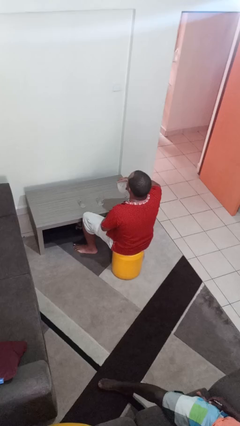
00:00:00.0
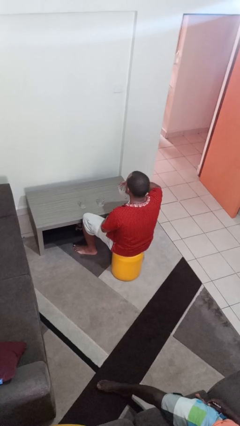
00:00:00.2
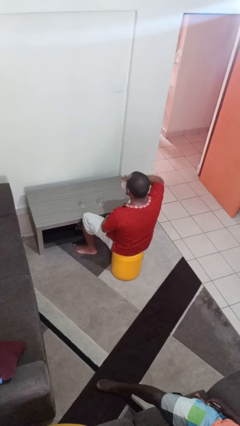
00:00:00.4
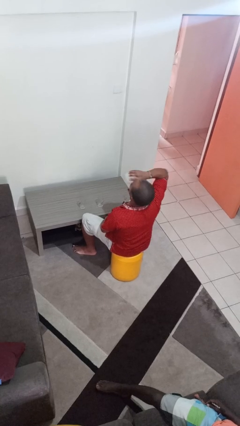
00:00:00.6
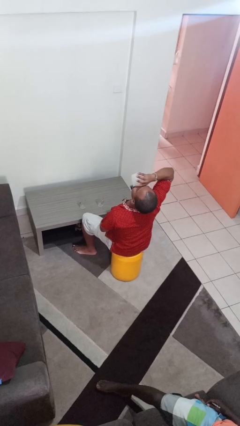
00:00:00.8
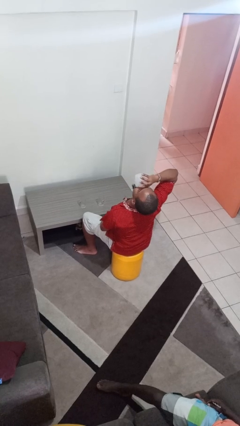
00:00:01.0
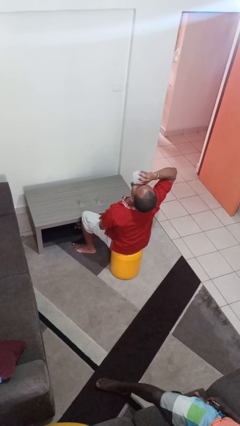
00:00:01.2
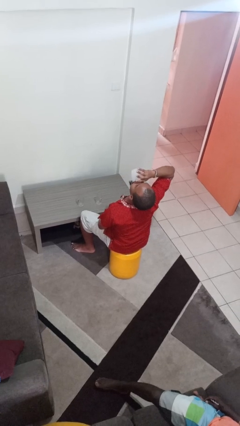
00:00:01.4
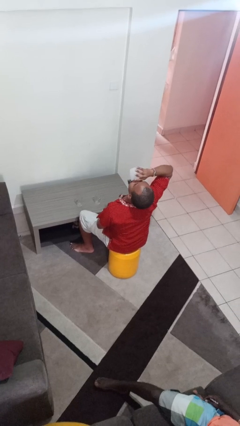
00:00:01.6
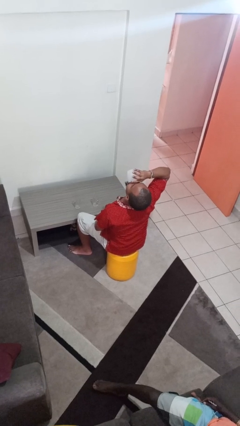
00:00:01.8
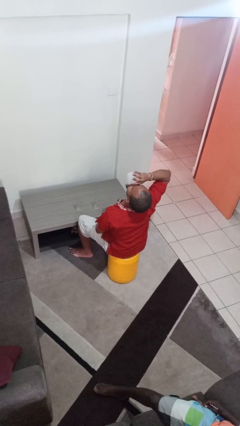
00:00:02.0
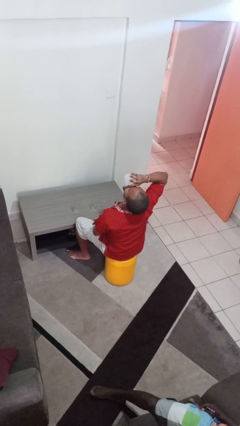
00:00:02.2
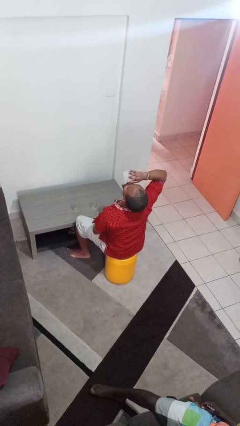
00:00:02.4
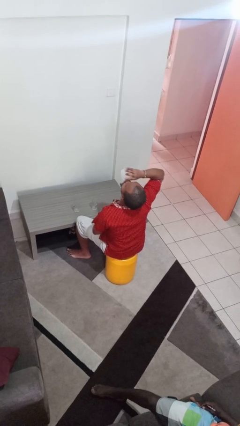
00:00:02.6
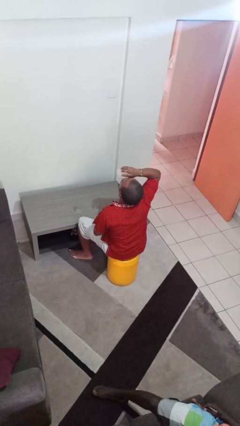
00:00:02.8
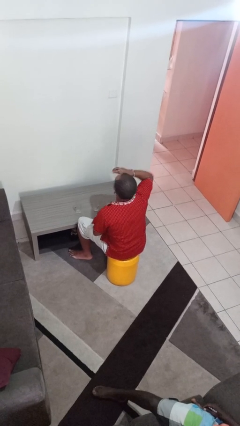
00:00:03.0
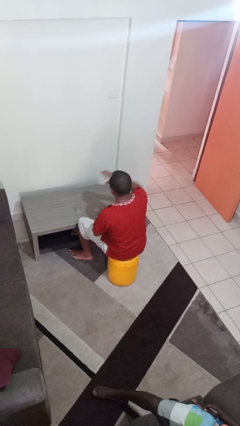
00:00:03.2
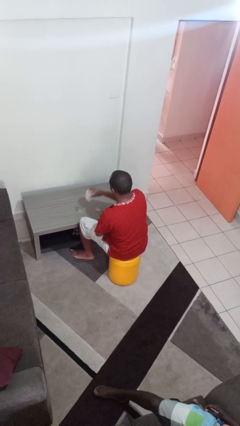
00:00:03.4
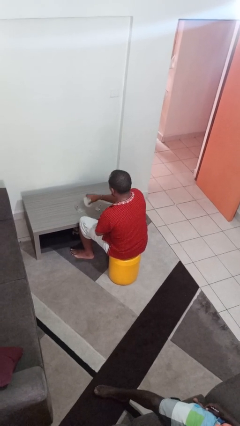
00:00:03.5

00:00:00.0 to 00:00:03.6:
person drinks from shotglass

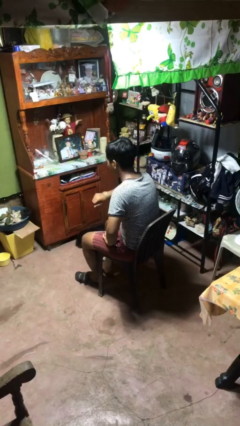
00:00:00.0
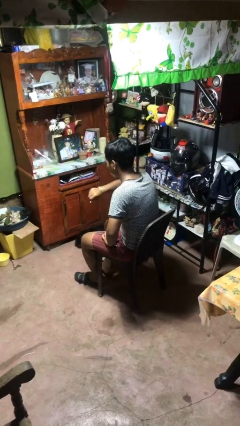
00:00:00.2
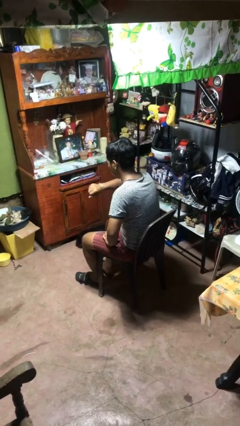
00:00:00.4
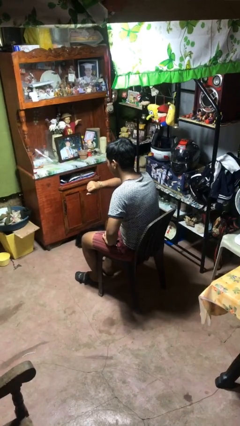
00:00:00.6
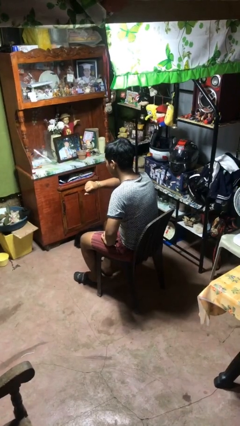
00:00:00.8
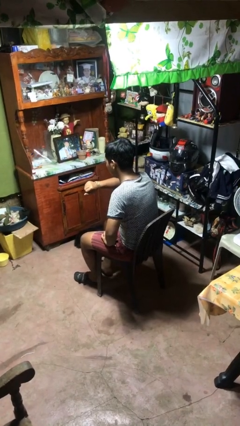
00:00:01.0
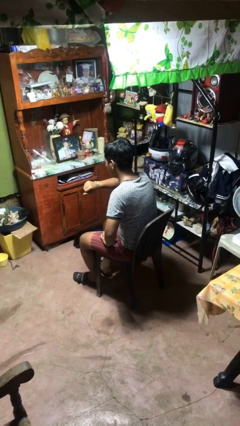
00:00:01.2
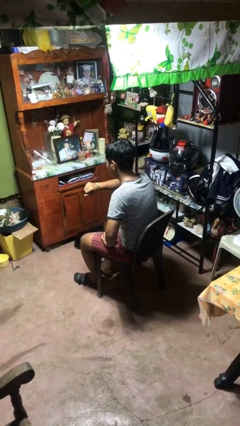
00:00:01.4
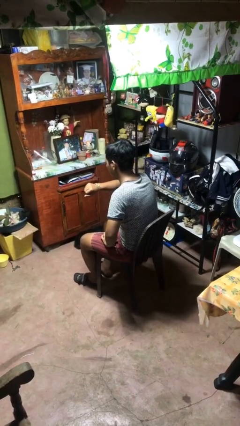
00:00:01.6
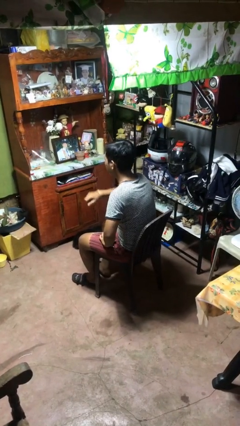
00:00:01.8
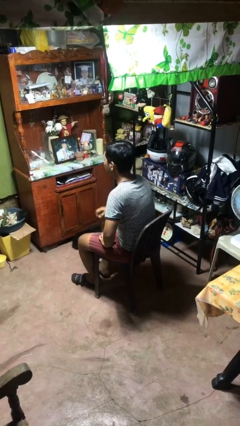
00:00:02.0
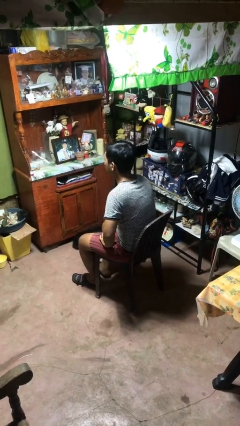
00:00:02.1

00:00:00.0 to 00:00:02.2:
person looks at wristwatch

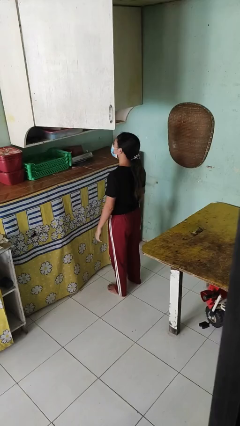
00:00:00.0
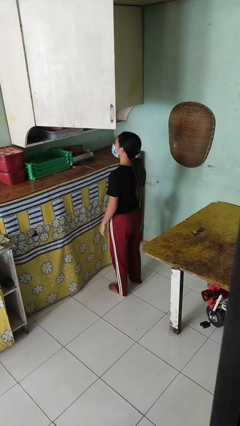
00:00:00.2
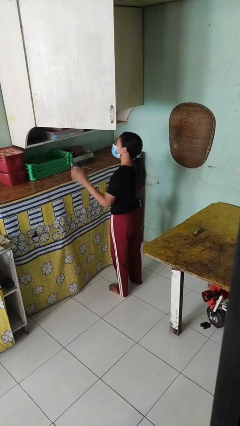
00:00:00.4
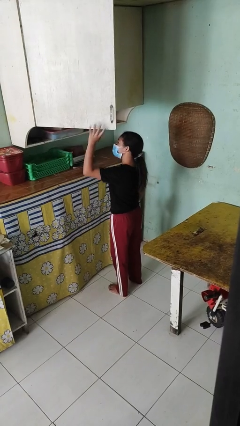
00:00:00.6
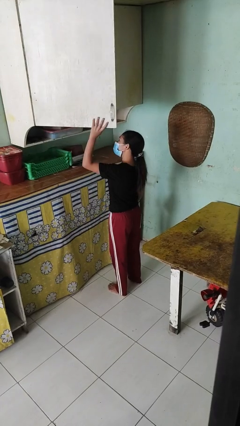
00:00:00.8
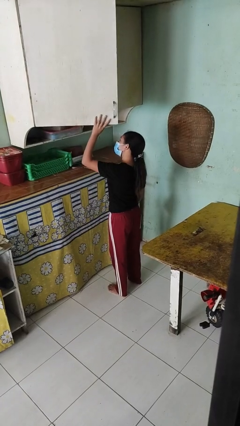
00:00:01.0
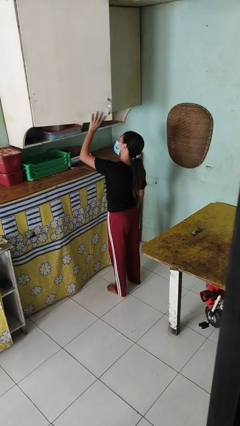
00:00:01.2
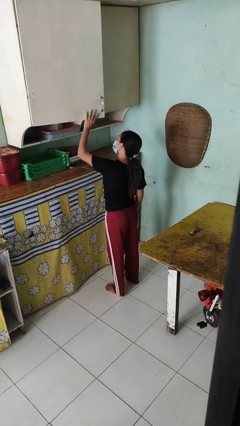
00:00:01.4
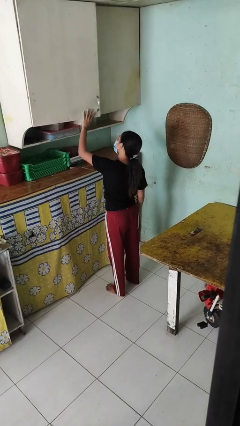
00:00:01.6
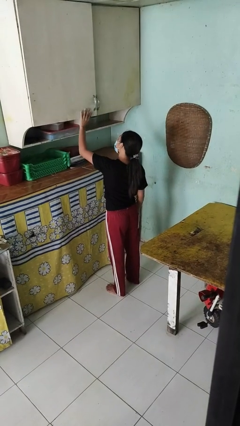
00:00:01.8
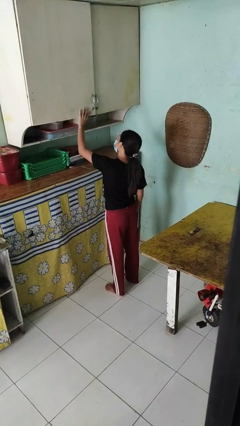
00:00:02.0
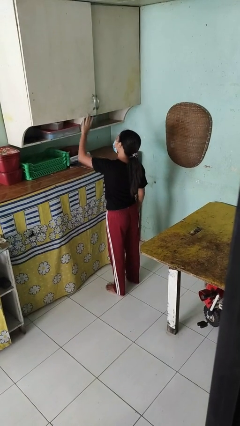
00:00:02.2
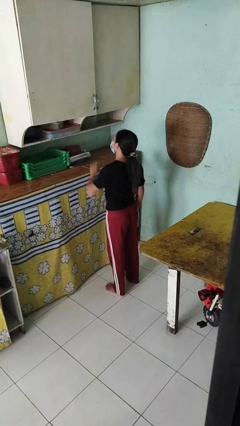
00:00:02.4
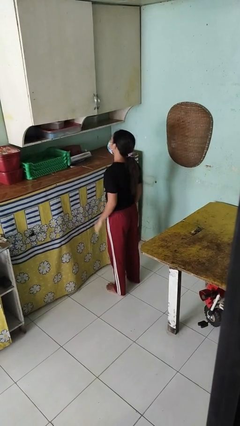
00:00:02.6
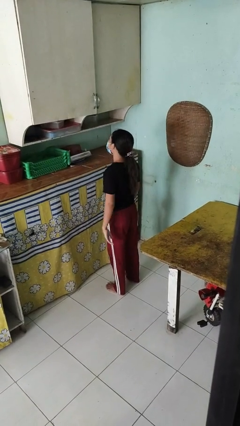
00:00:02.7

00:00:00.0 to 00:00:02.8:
person closes cabinet

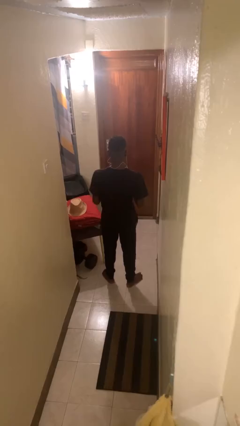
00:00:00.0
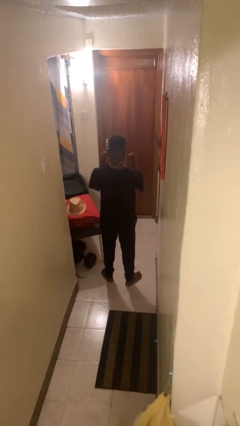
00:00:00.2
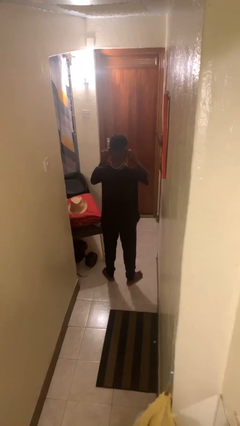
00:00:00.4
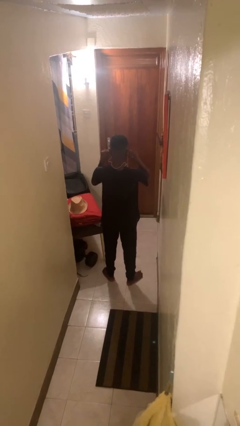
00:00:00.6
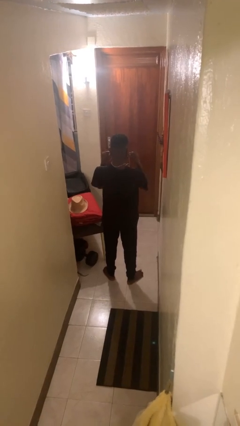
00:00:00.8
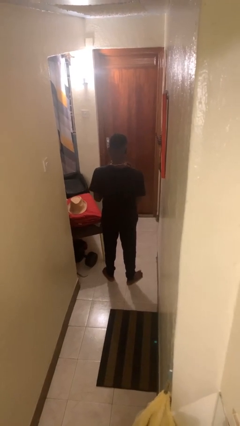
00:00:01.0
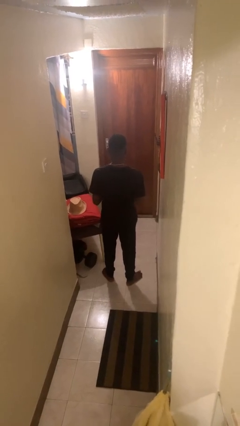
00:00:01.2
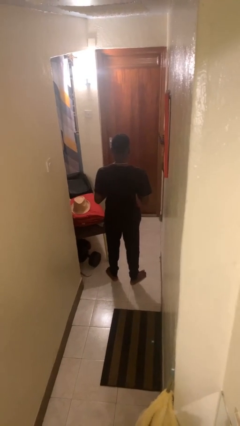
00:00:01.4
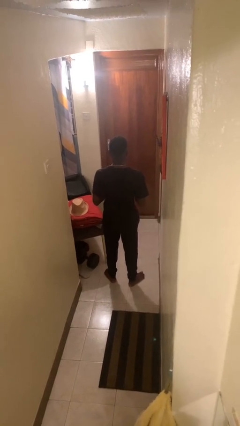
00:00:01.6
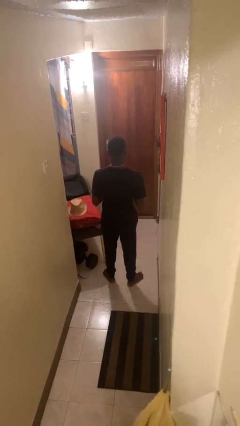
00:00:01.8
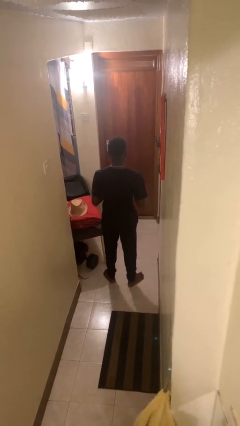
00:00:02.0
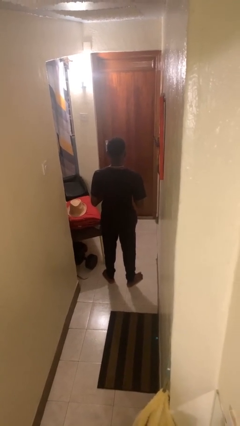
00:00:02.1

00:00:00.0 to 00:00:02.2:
person takes off headphones

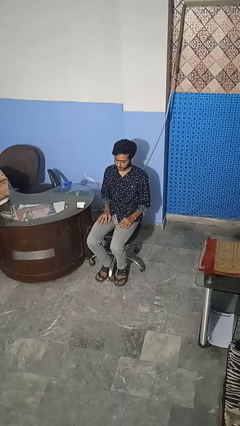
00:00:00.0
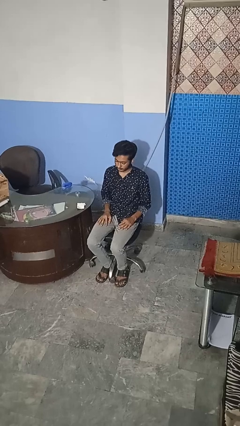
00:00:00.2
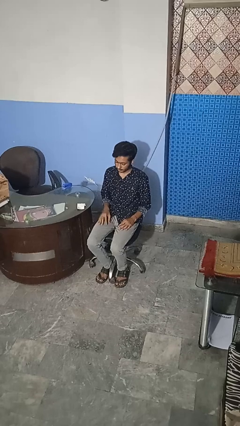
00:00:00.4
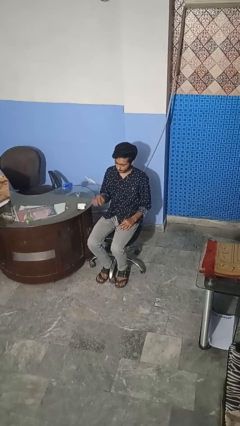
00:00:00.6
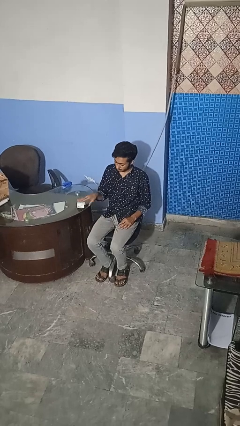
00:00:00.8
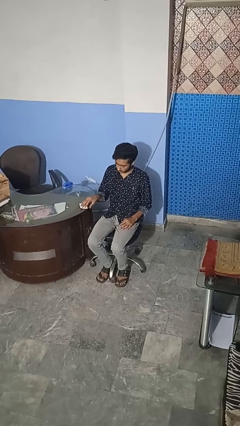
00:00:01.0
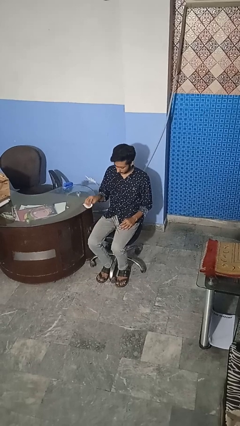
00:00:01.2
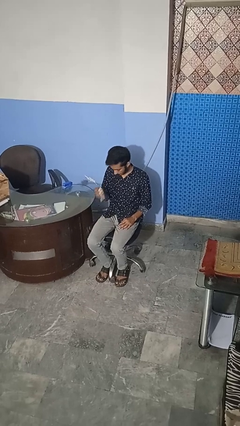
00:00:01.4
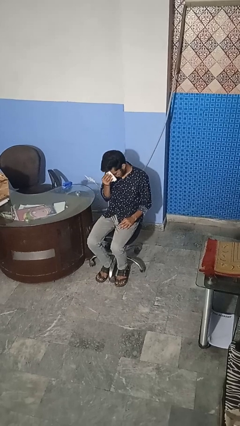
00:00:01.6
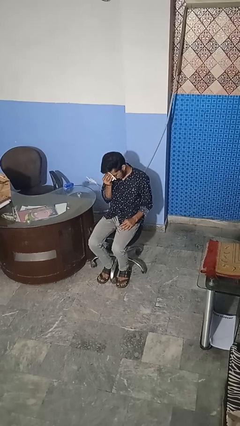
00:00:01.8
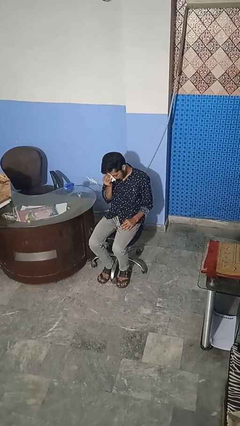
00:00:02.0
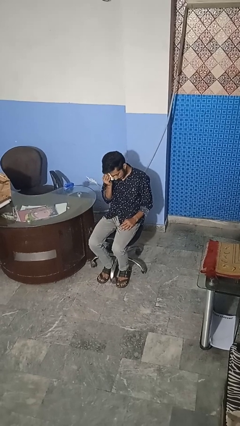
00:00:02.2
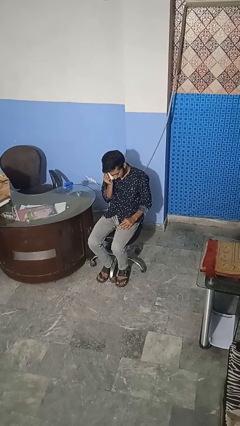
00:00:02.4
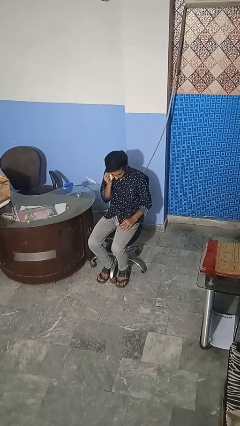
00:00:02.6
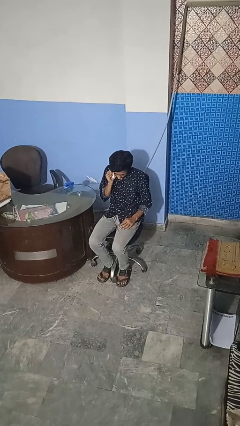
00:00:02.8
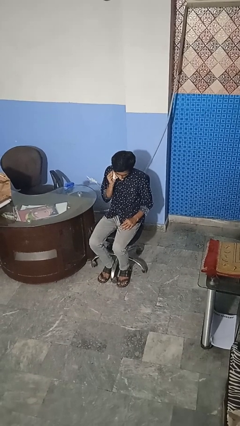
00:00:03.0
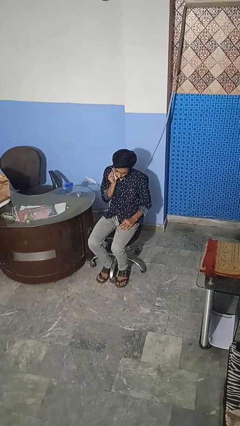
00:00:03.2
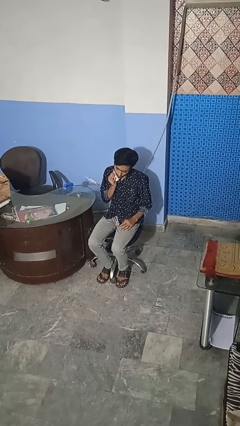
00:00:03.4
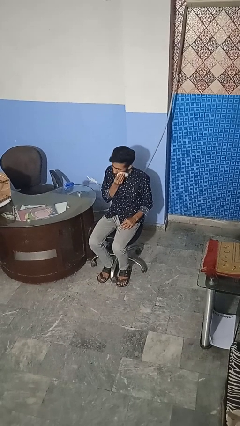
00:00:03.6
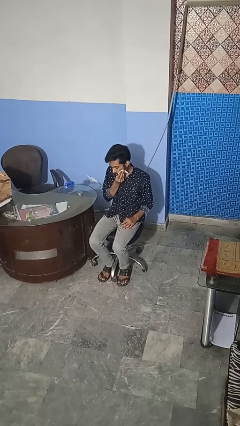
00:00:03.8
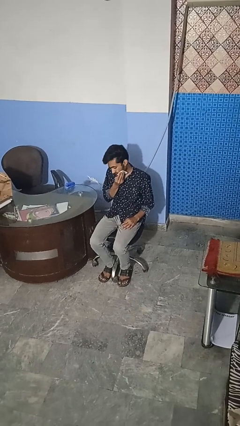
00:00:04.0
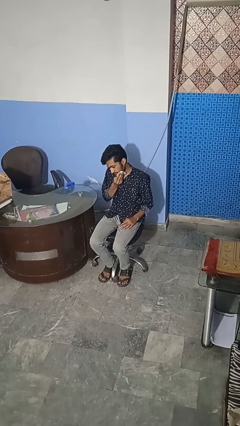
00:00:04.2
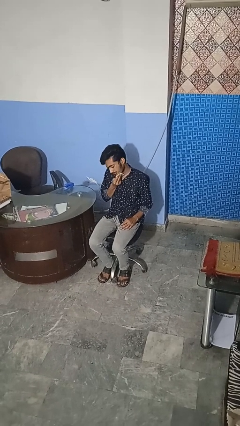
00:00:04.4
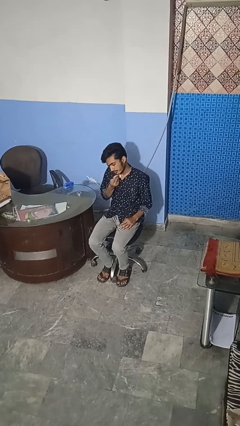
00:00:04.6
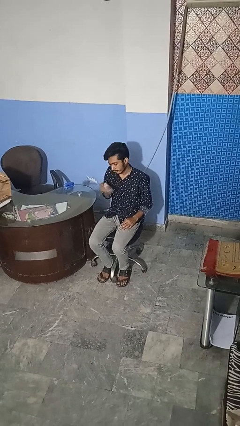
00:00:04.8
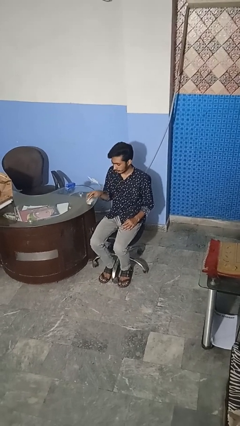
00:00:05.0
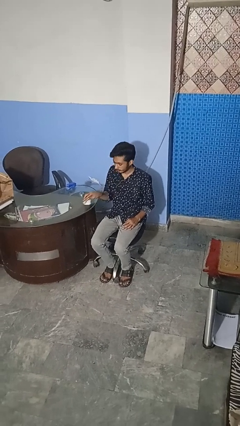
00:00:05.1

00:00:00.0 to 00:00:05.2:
person wipes mouth with napkin

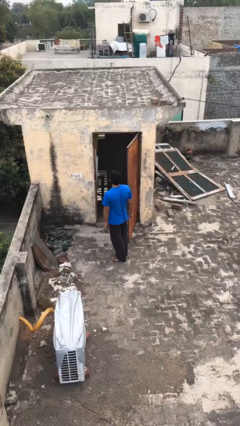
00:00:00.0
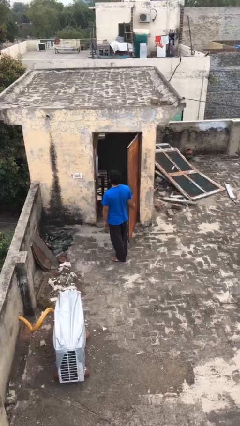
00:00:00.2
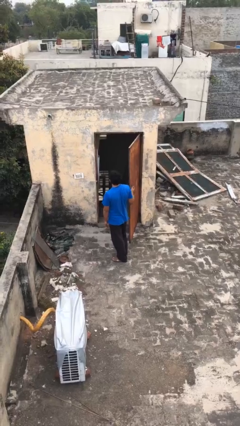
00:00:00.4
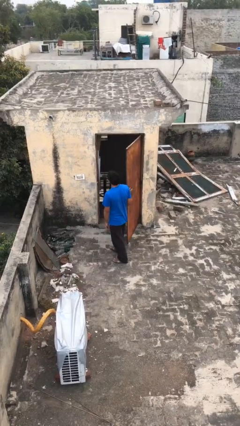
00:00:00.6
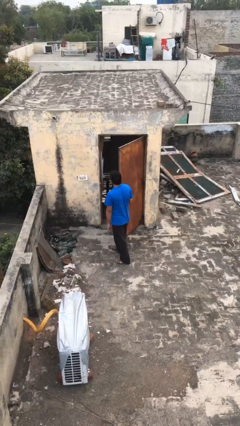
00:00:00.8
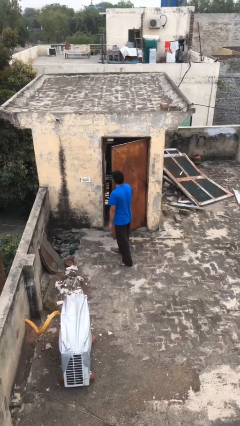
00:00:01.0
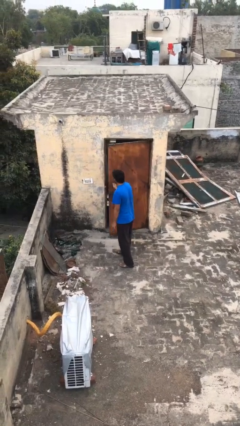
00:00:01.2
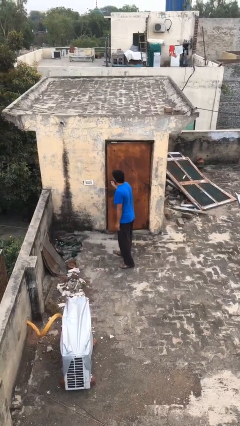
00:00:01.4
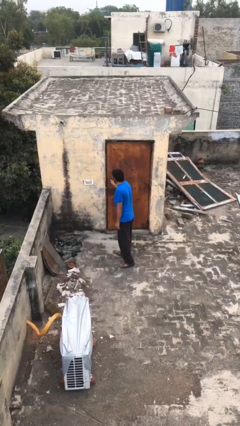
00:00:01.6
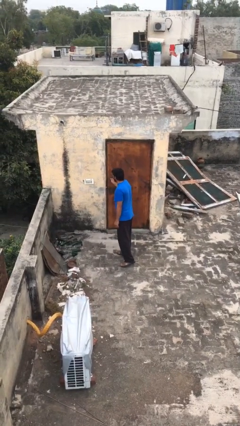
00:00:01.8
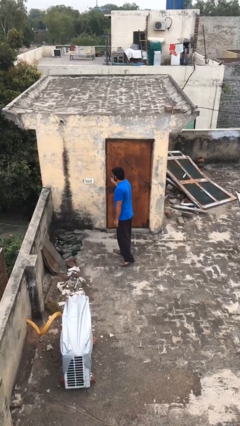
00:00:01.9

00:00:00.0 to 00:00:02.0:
person closes facility door
